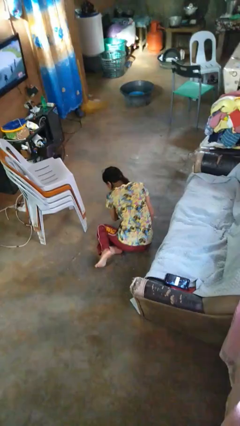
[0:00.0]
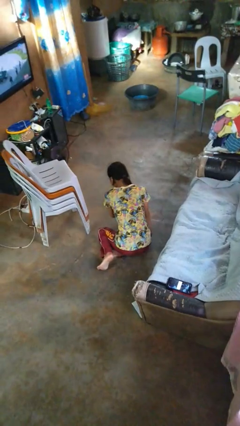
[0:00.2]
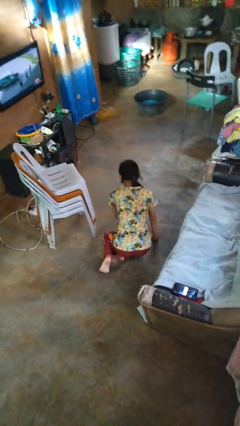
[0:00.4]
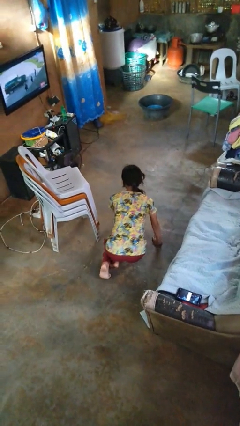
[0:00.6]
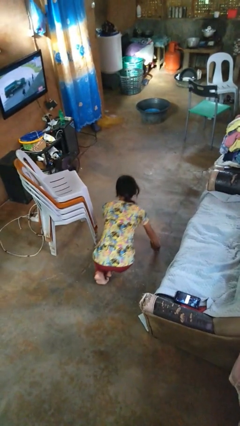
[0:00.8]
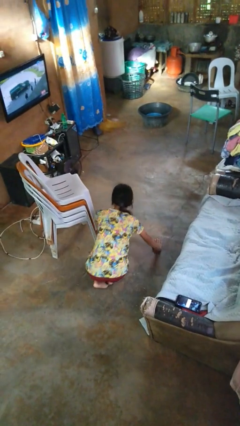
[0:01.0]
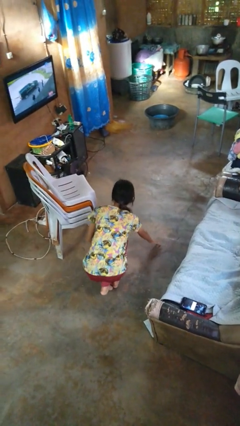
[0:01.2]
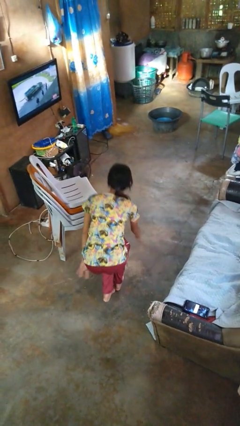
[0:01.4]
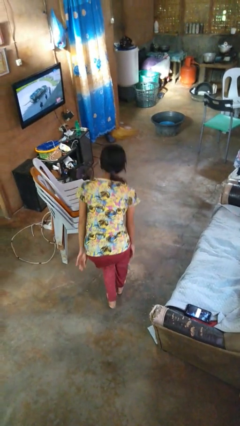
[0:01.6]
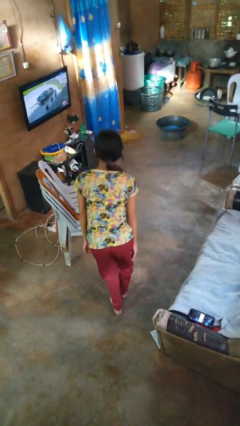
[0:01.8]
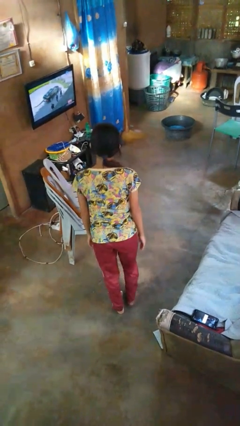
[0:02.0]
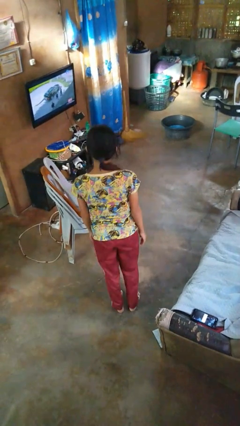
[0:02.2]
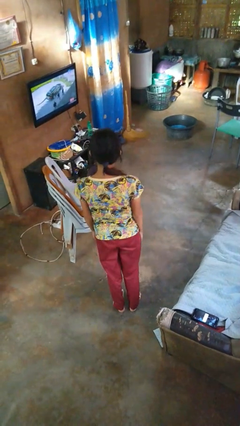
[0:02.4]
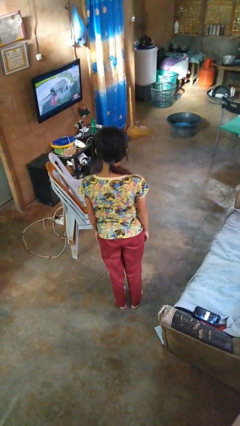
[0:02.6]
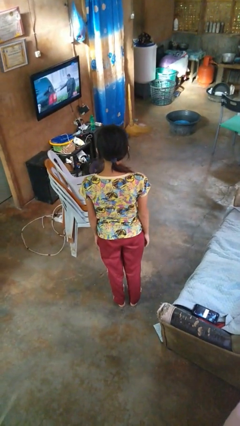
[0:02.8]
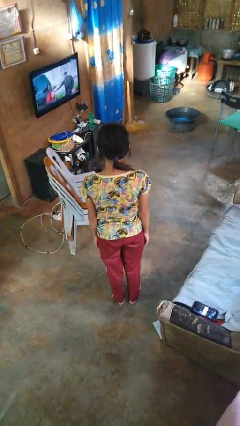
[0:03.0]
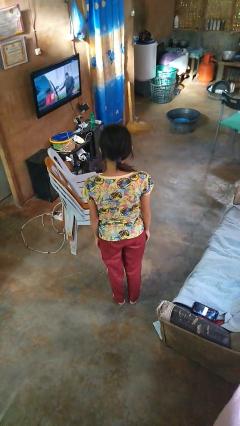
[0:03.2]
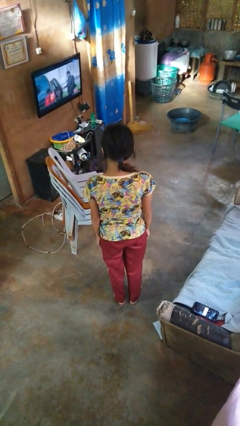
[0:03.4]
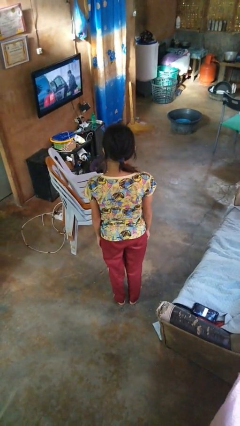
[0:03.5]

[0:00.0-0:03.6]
person stands up from floor

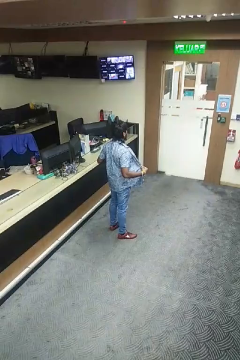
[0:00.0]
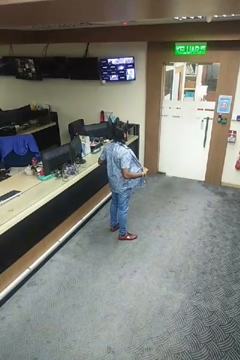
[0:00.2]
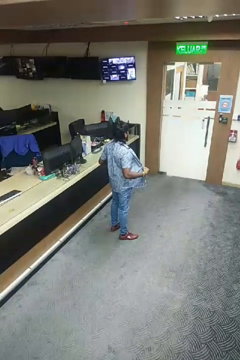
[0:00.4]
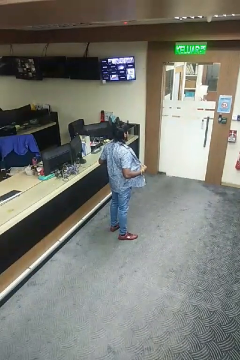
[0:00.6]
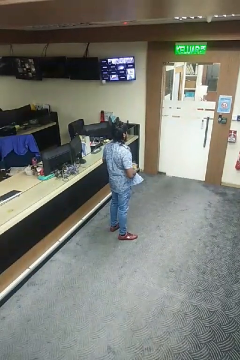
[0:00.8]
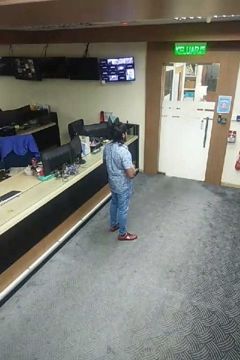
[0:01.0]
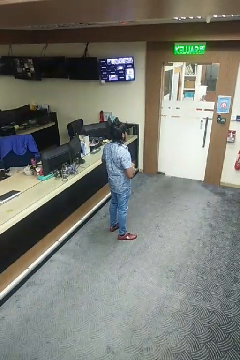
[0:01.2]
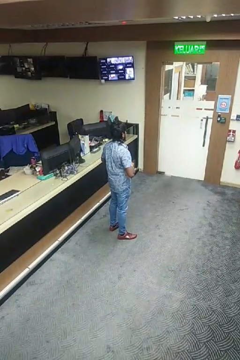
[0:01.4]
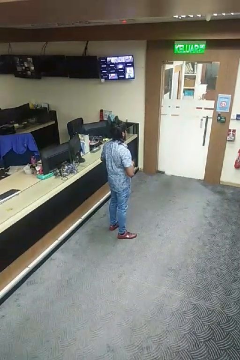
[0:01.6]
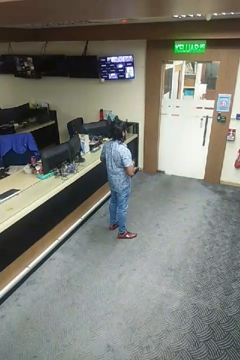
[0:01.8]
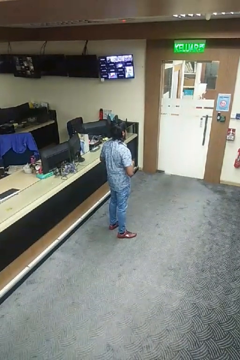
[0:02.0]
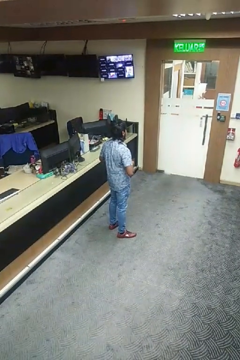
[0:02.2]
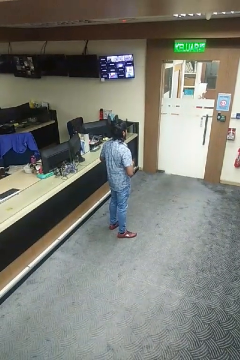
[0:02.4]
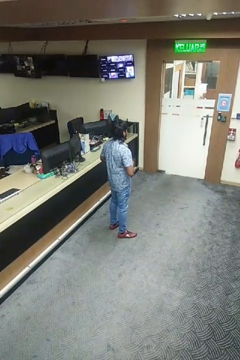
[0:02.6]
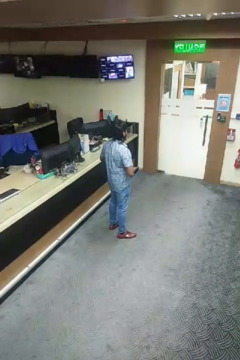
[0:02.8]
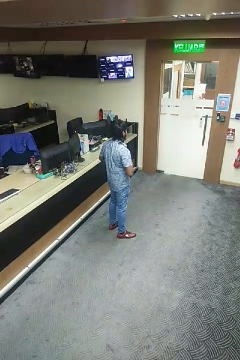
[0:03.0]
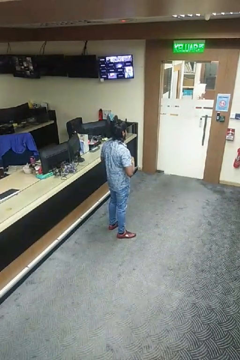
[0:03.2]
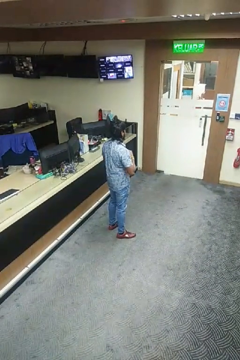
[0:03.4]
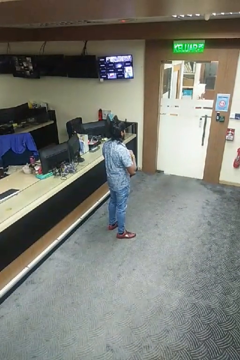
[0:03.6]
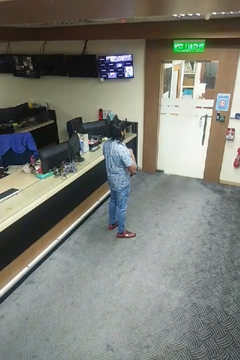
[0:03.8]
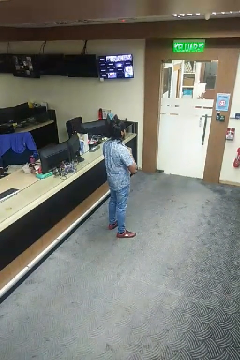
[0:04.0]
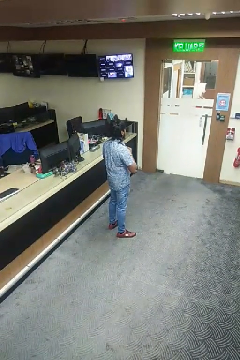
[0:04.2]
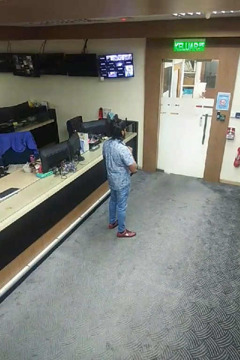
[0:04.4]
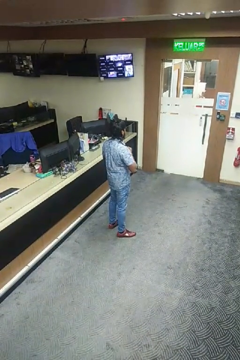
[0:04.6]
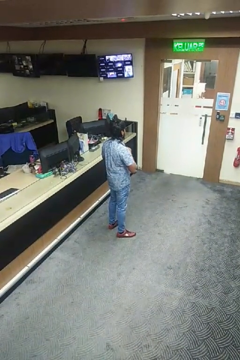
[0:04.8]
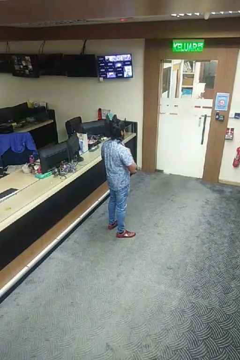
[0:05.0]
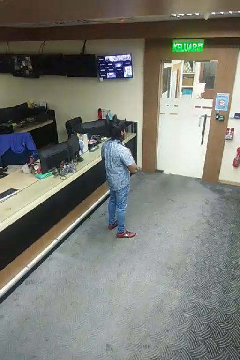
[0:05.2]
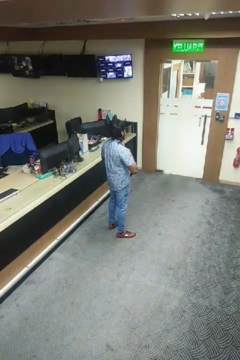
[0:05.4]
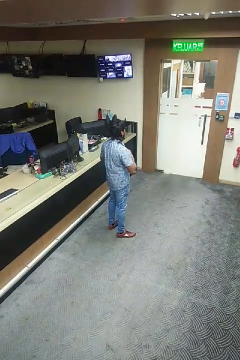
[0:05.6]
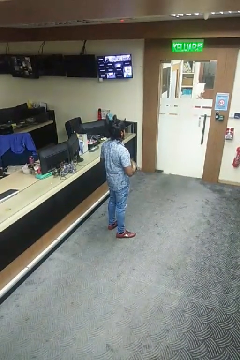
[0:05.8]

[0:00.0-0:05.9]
person buttons shirt

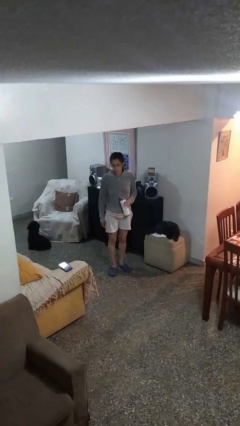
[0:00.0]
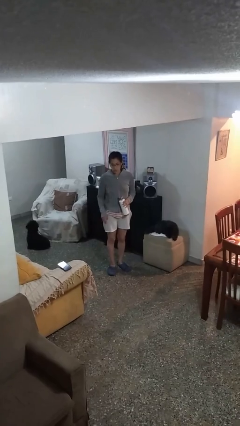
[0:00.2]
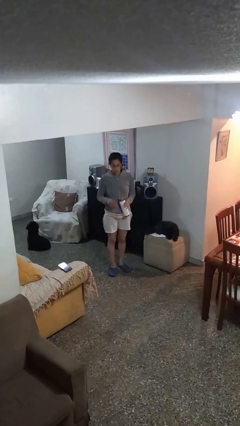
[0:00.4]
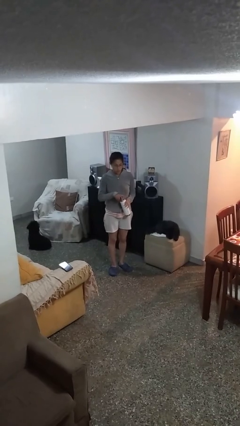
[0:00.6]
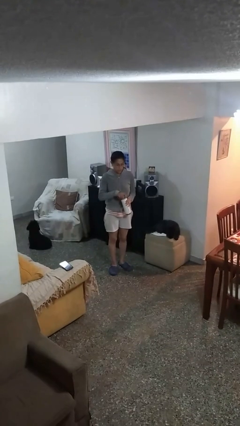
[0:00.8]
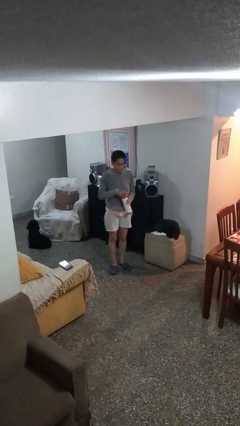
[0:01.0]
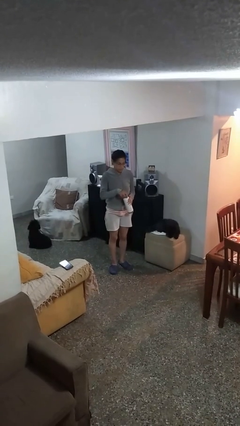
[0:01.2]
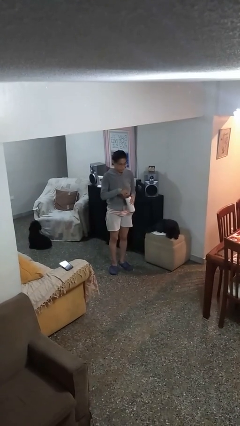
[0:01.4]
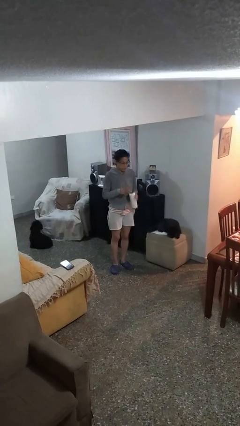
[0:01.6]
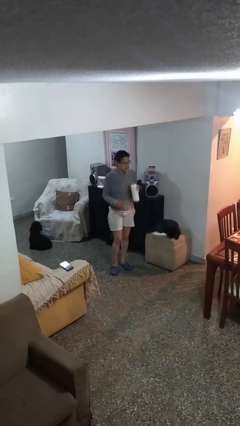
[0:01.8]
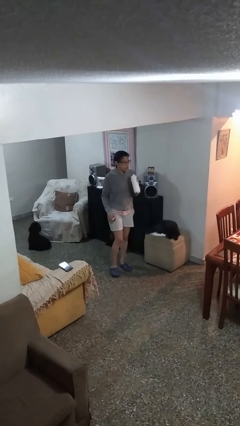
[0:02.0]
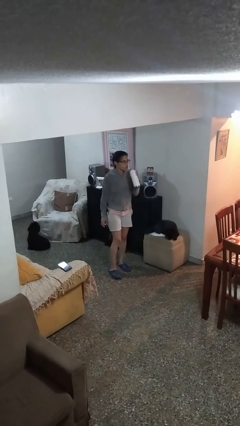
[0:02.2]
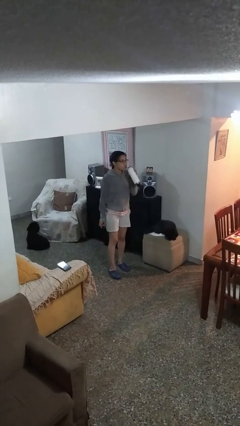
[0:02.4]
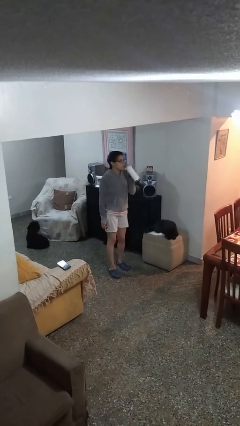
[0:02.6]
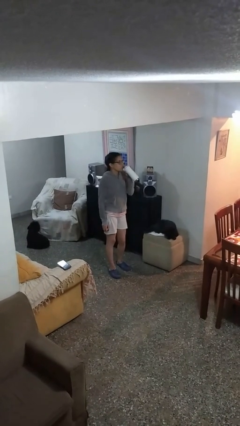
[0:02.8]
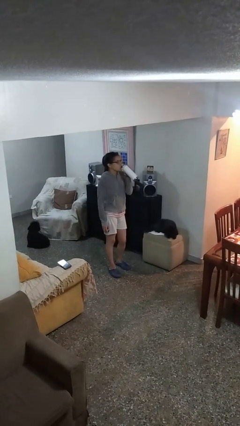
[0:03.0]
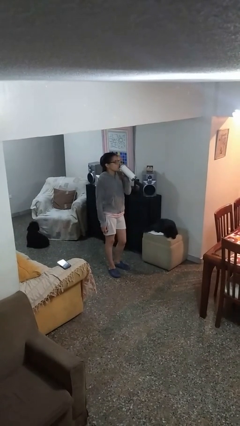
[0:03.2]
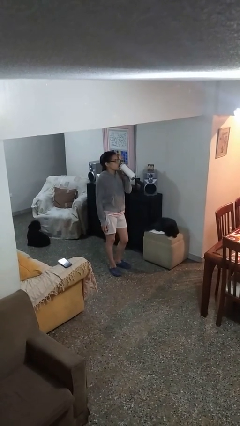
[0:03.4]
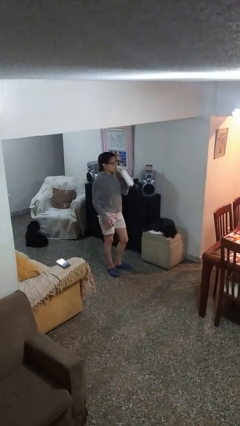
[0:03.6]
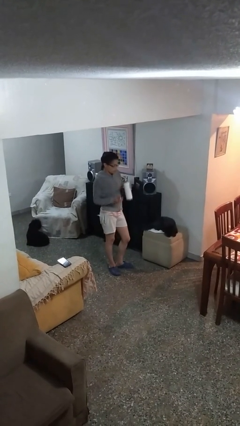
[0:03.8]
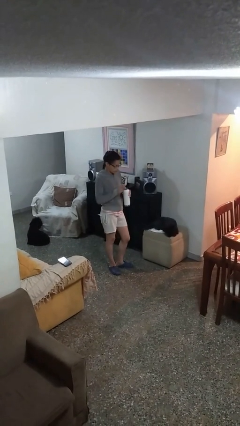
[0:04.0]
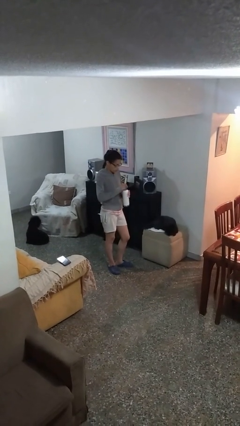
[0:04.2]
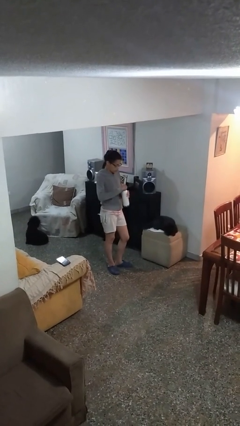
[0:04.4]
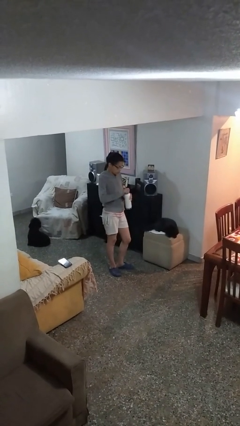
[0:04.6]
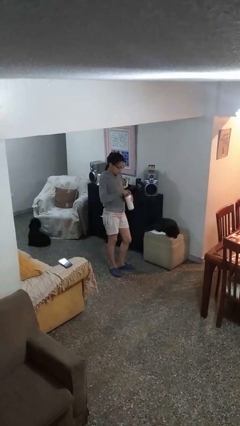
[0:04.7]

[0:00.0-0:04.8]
person drinks from bottle

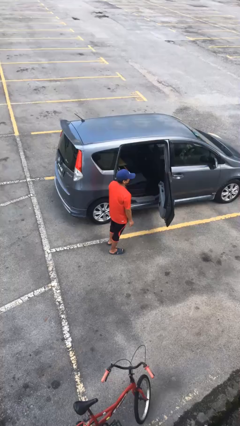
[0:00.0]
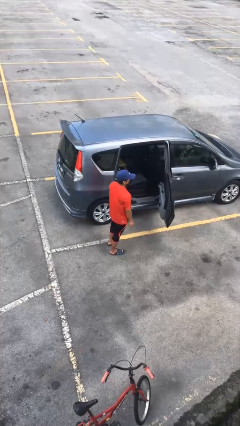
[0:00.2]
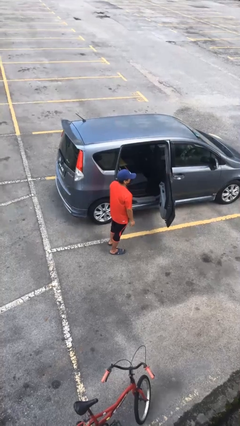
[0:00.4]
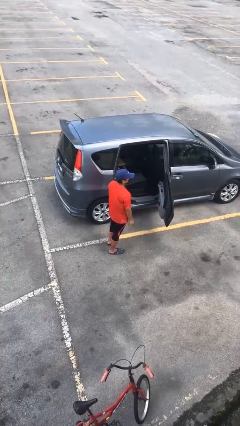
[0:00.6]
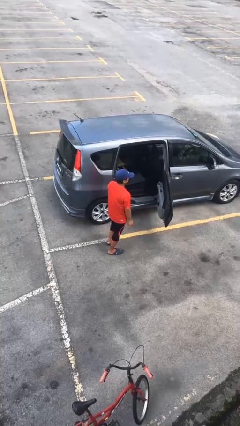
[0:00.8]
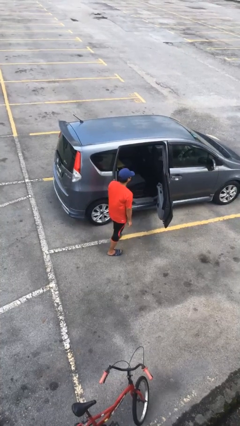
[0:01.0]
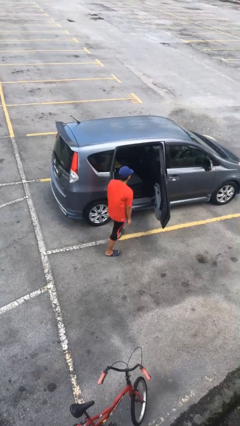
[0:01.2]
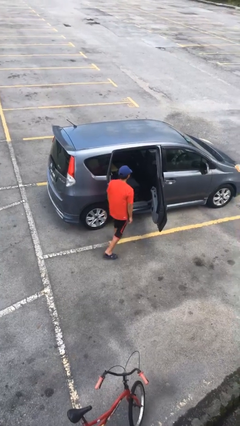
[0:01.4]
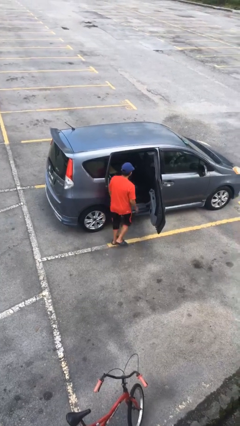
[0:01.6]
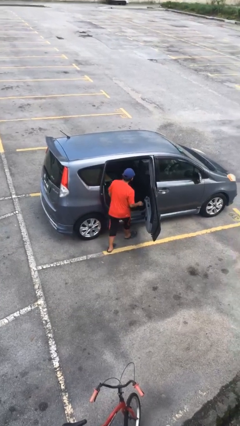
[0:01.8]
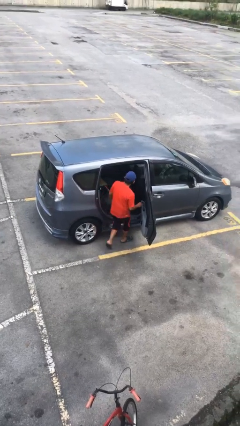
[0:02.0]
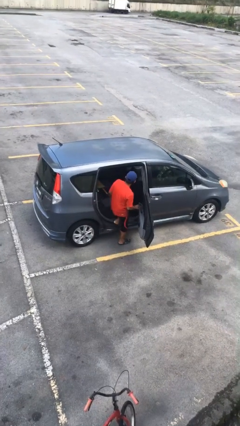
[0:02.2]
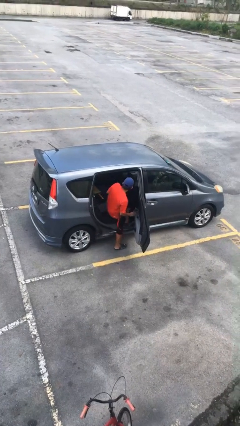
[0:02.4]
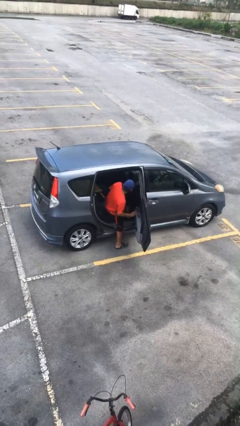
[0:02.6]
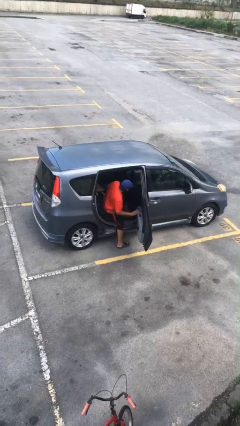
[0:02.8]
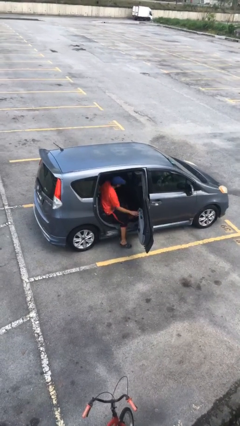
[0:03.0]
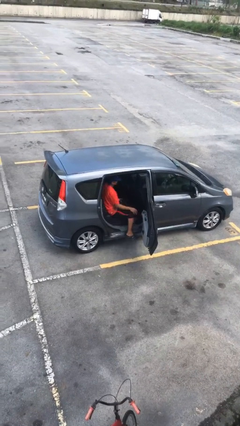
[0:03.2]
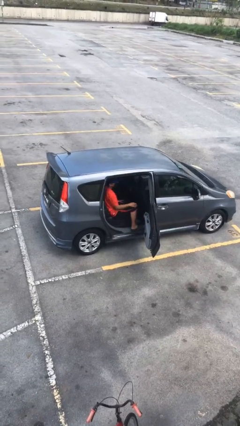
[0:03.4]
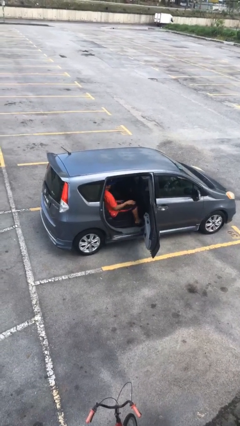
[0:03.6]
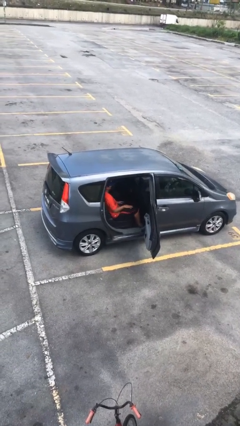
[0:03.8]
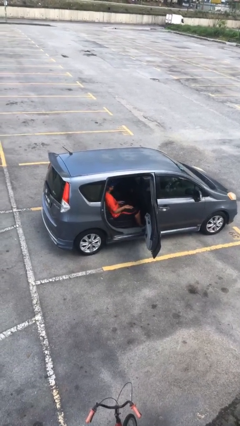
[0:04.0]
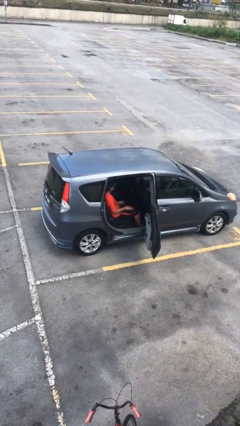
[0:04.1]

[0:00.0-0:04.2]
person enters car

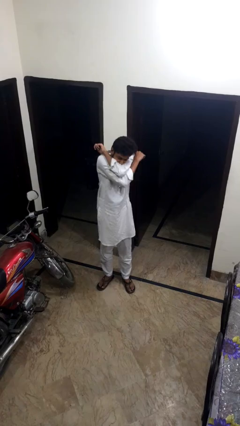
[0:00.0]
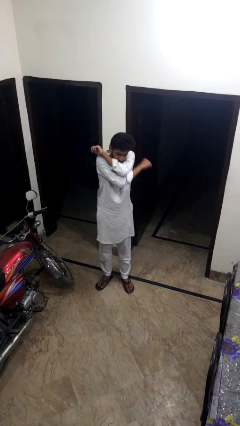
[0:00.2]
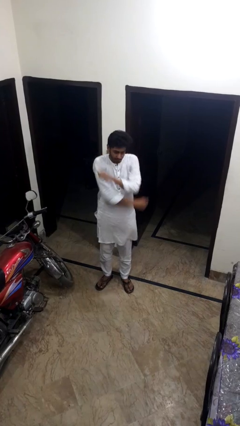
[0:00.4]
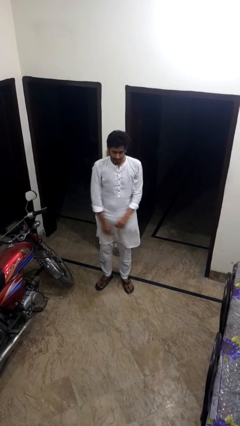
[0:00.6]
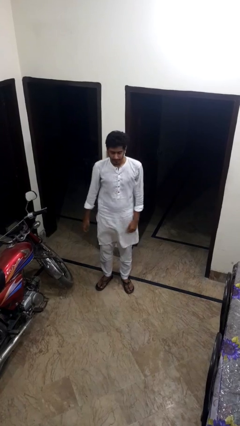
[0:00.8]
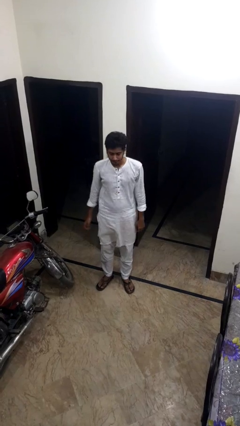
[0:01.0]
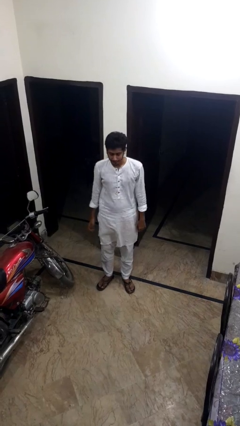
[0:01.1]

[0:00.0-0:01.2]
person sneezes into arm
